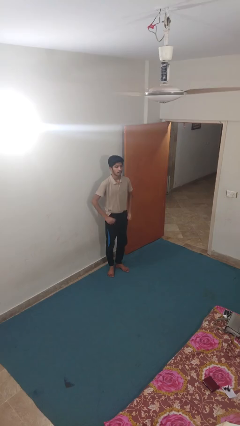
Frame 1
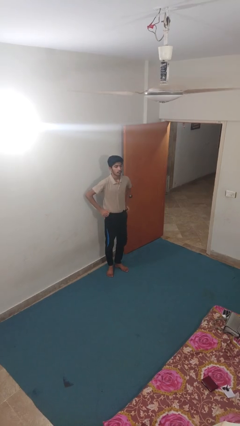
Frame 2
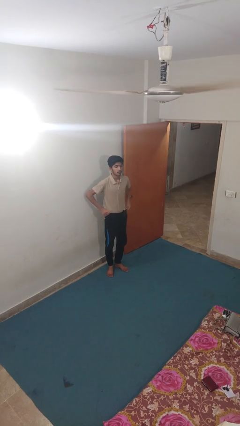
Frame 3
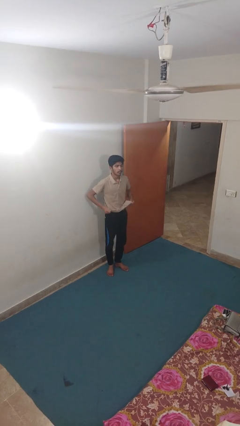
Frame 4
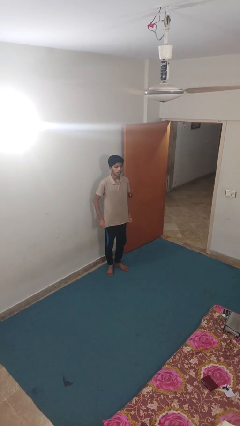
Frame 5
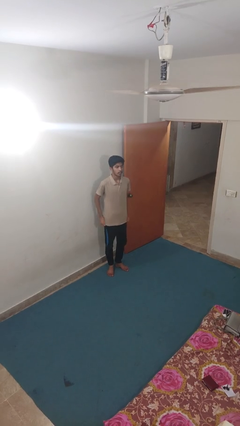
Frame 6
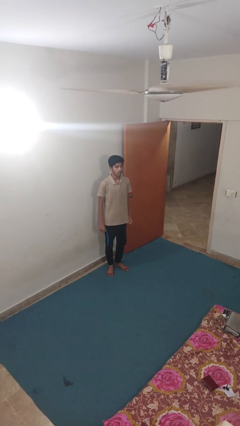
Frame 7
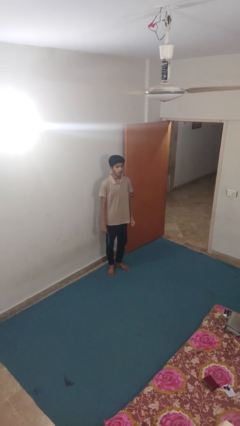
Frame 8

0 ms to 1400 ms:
person untucks shirt

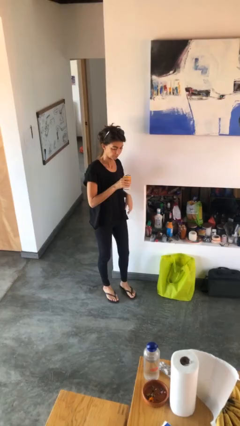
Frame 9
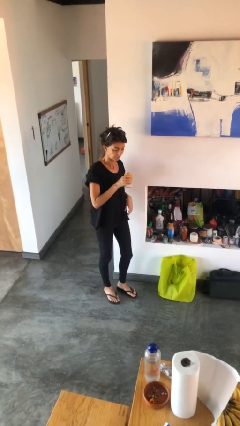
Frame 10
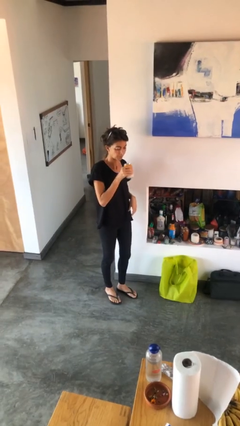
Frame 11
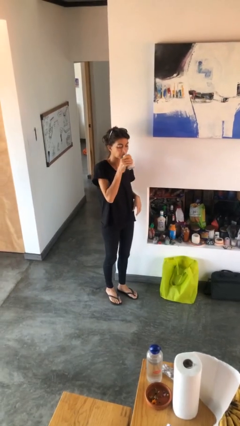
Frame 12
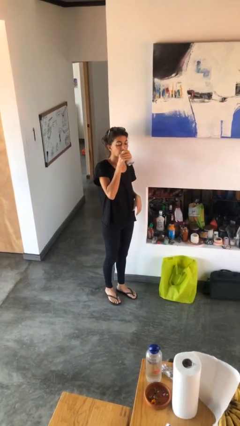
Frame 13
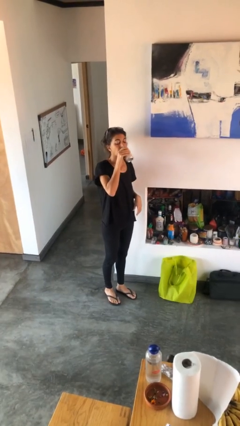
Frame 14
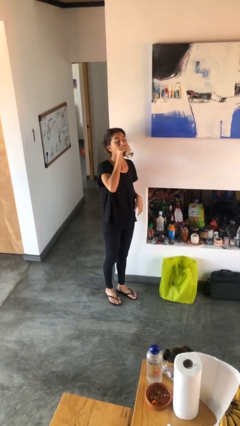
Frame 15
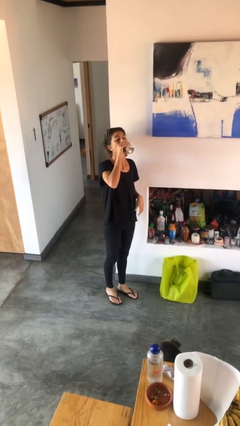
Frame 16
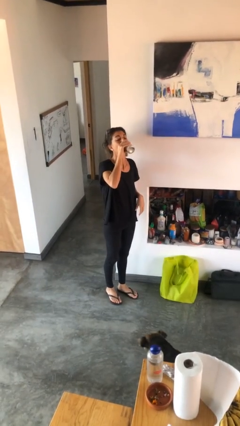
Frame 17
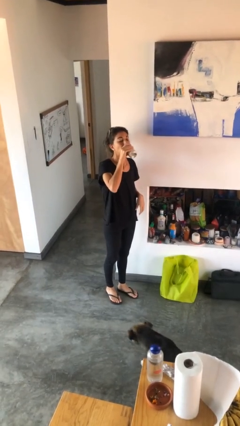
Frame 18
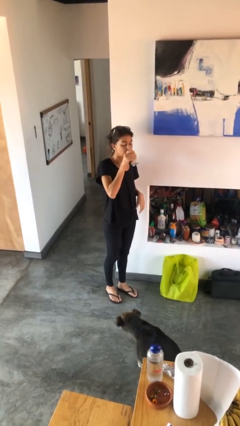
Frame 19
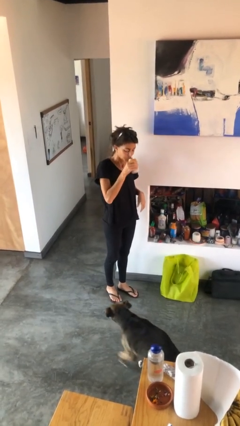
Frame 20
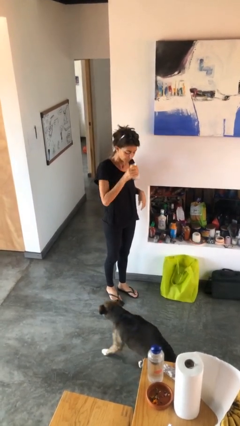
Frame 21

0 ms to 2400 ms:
person drinks from beverage can

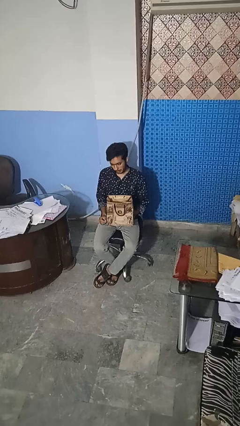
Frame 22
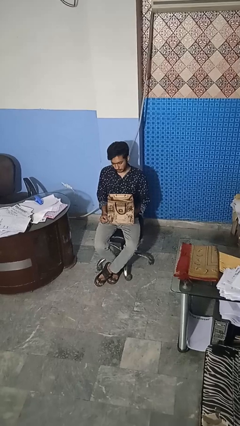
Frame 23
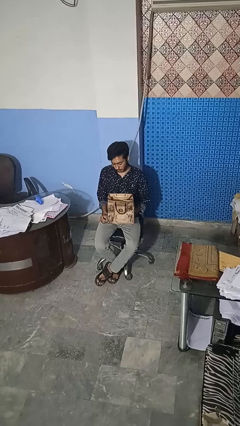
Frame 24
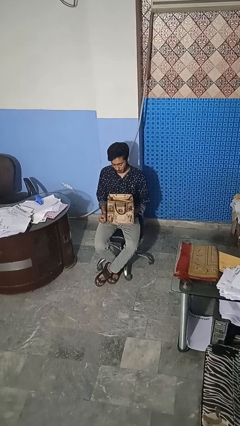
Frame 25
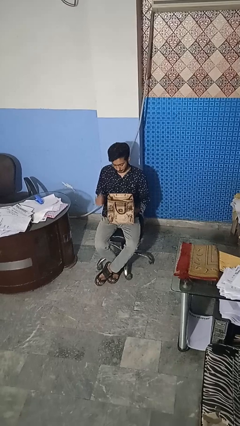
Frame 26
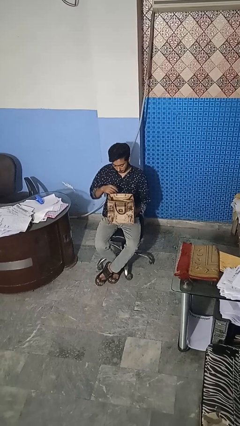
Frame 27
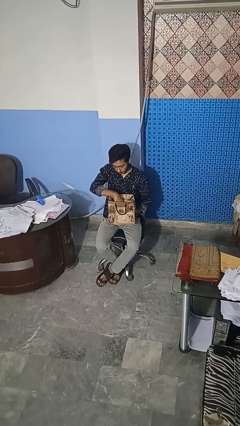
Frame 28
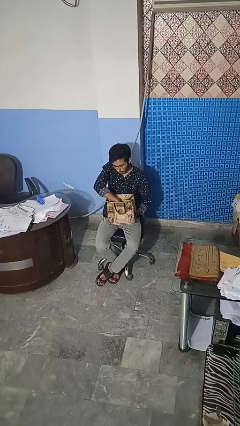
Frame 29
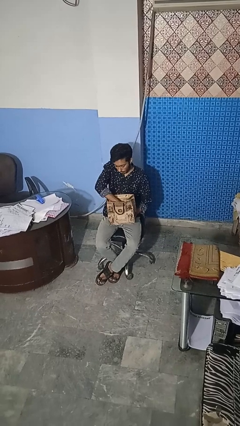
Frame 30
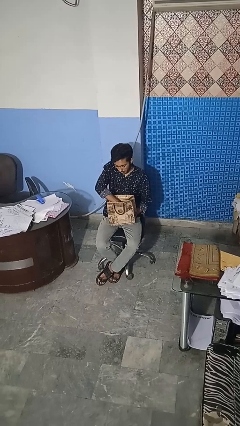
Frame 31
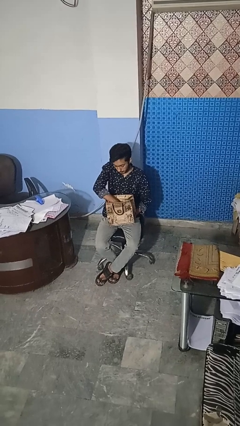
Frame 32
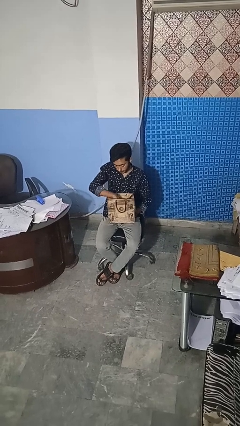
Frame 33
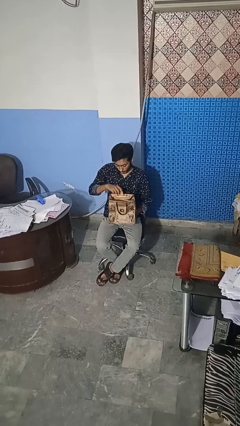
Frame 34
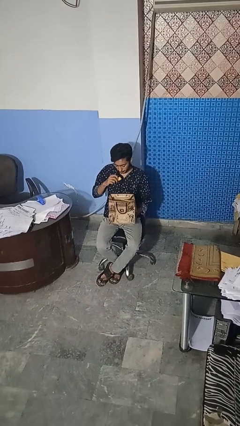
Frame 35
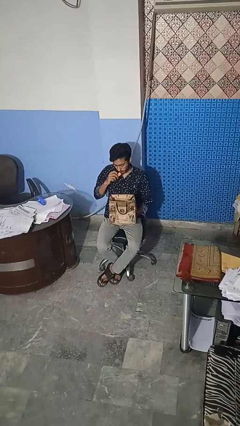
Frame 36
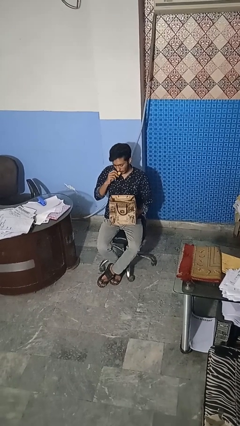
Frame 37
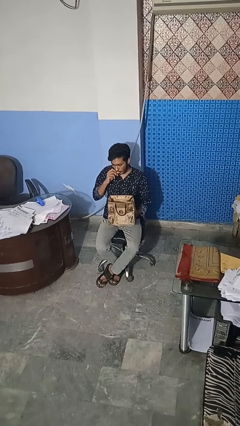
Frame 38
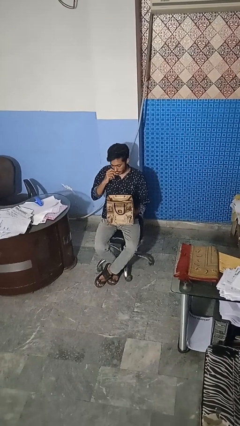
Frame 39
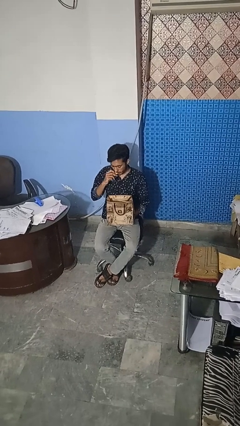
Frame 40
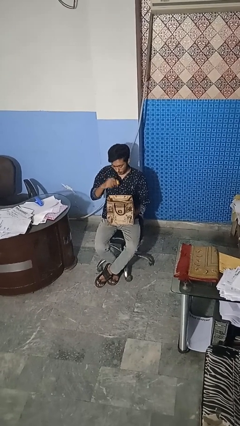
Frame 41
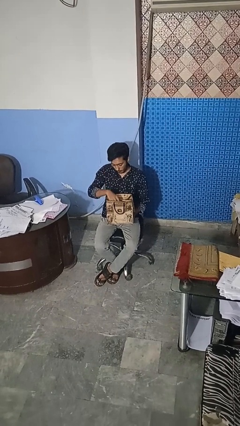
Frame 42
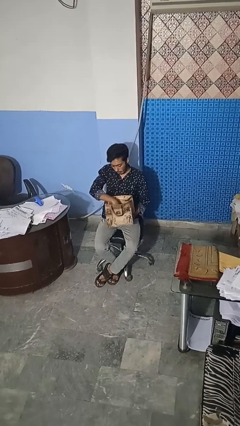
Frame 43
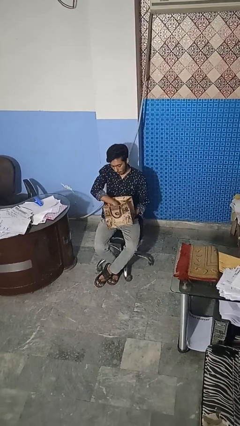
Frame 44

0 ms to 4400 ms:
person eats snack from bag

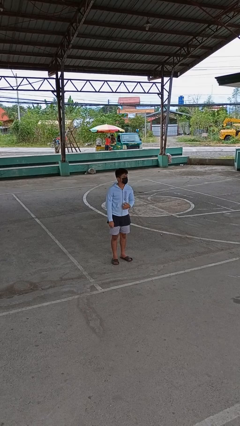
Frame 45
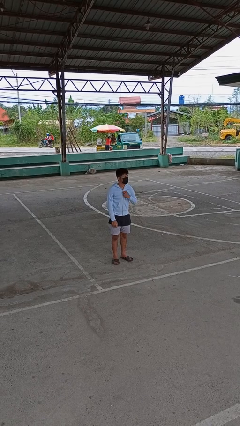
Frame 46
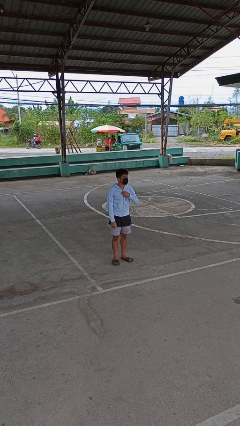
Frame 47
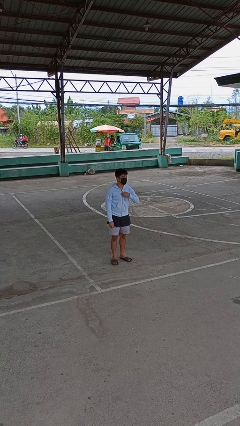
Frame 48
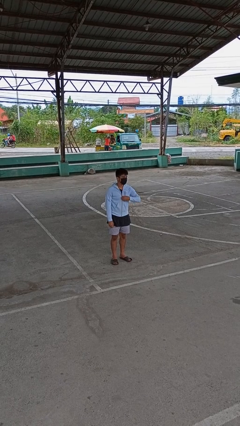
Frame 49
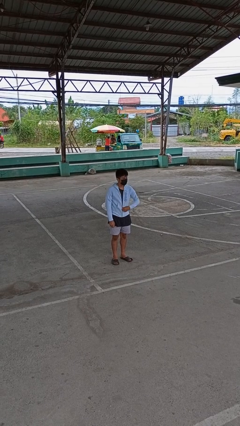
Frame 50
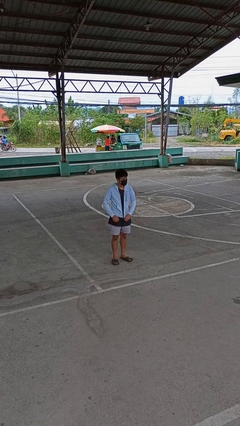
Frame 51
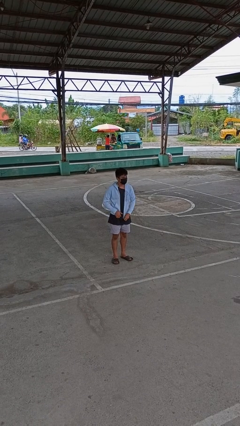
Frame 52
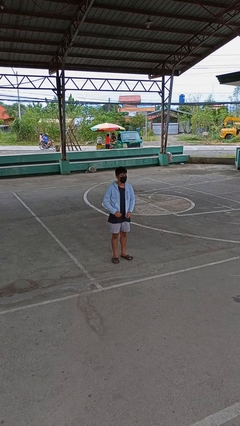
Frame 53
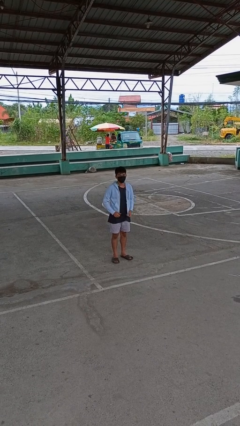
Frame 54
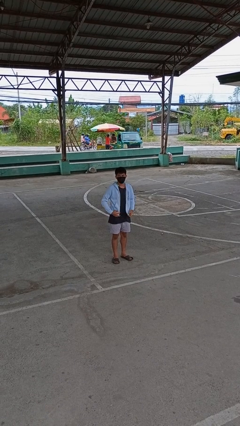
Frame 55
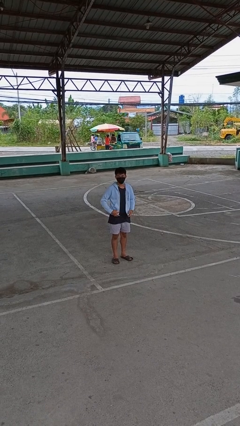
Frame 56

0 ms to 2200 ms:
person unzips jacket

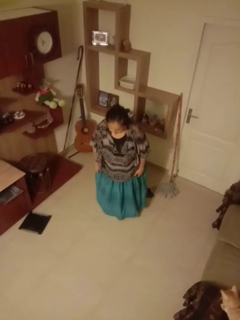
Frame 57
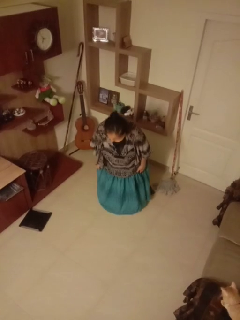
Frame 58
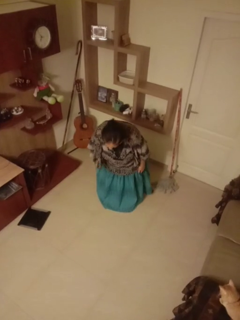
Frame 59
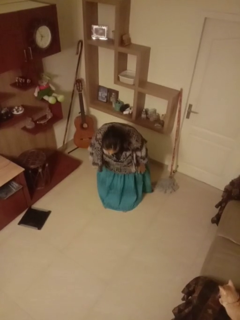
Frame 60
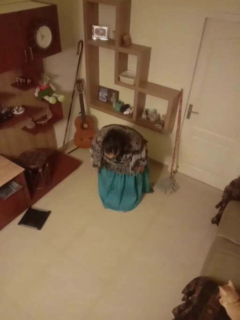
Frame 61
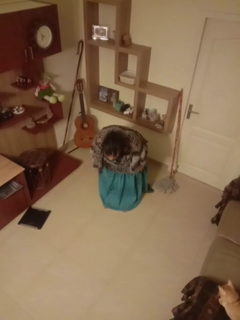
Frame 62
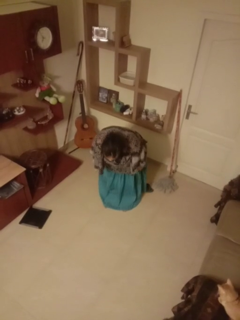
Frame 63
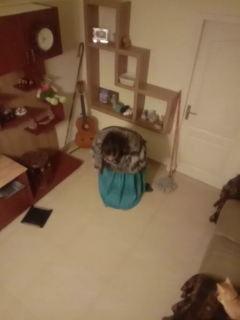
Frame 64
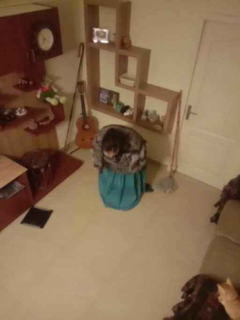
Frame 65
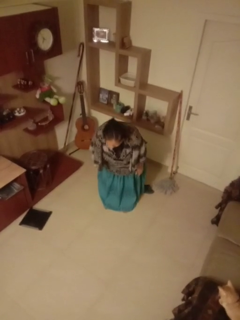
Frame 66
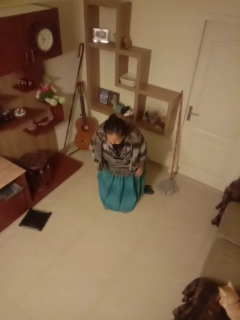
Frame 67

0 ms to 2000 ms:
person bows

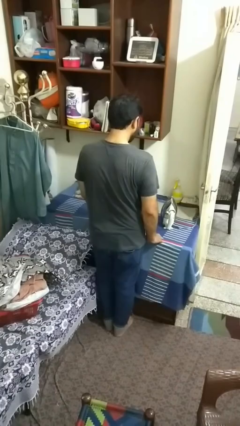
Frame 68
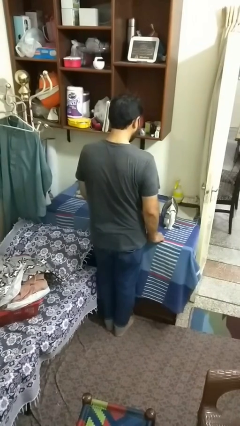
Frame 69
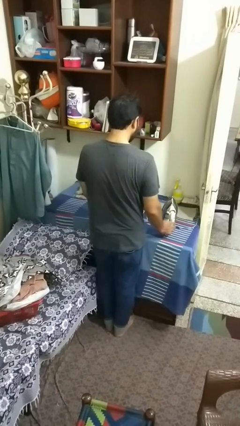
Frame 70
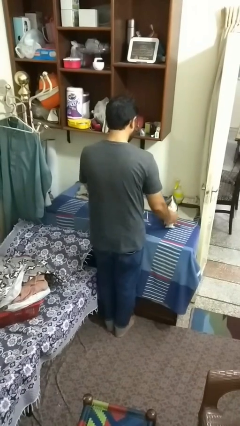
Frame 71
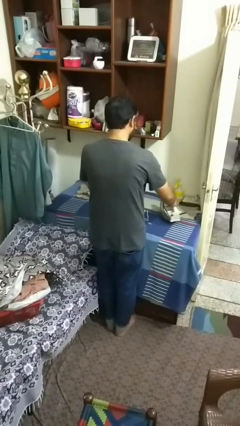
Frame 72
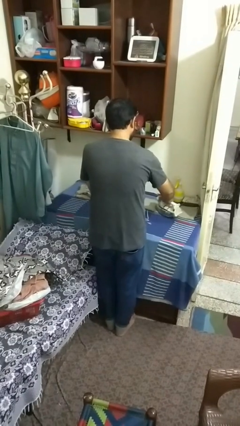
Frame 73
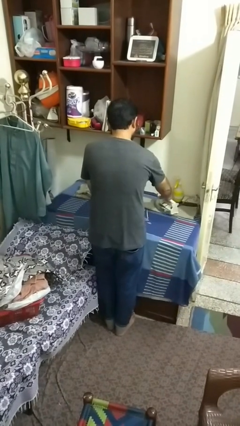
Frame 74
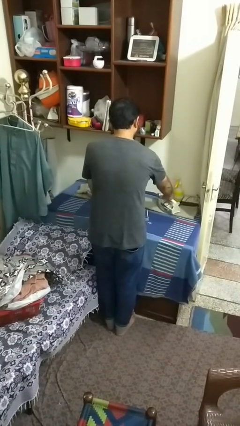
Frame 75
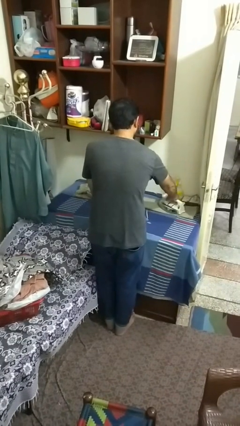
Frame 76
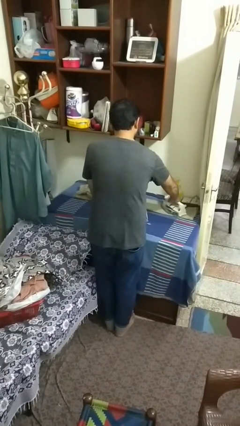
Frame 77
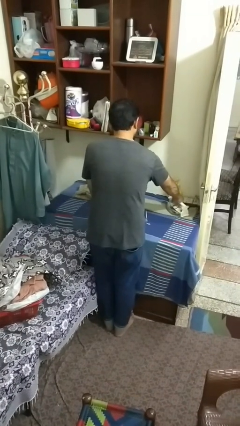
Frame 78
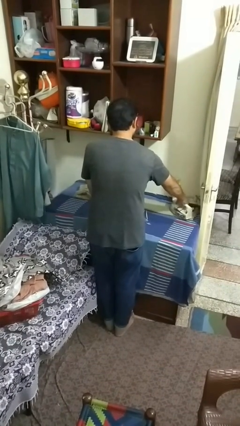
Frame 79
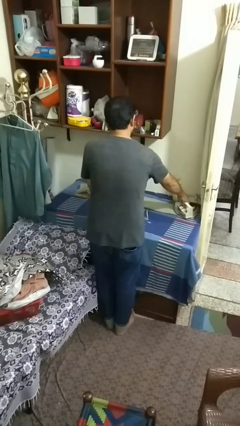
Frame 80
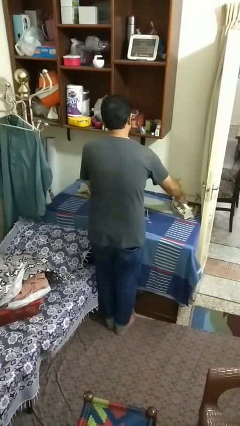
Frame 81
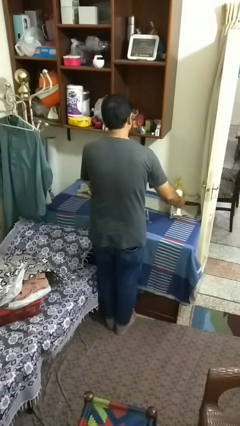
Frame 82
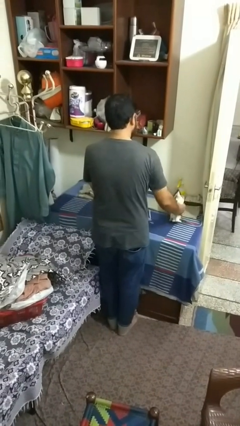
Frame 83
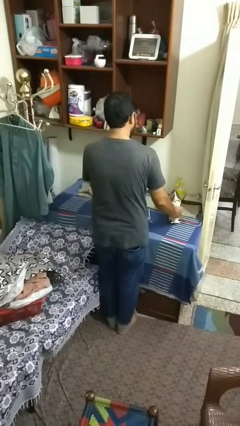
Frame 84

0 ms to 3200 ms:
person irons clothes

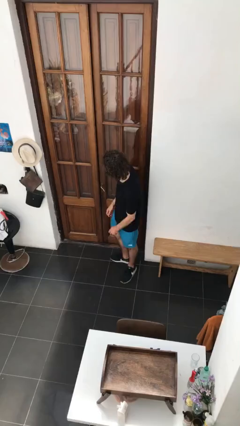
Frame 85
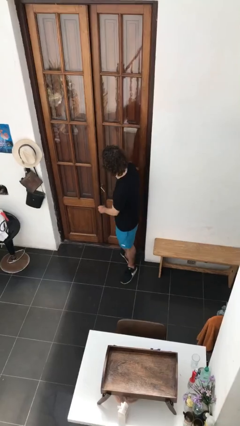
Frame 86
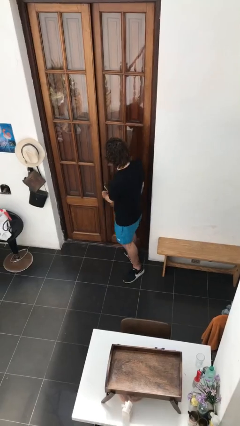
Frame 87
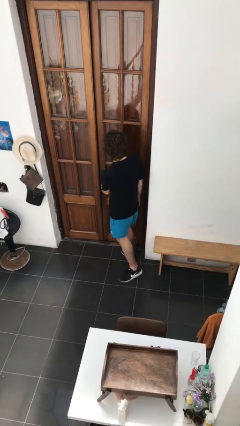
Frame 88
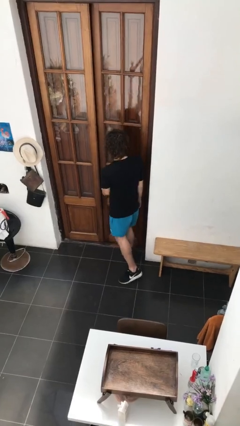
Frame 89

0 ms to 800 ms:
person opens facility door

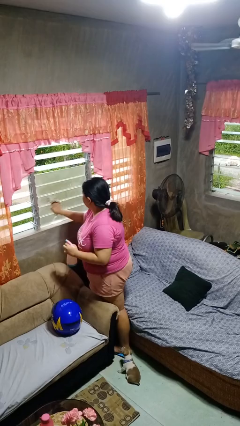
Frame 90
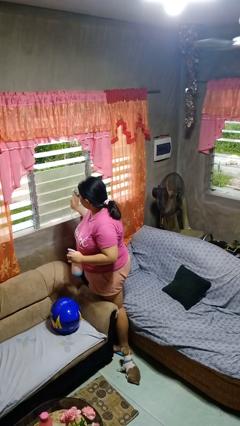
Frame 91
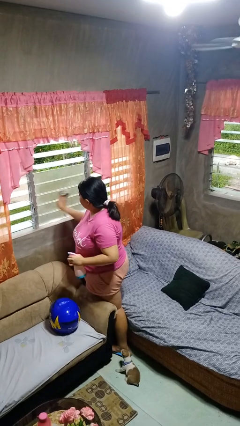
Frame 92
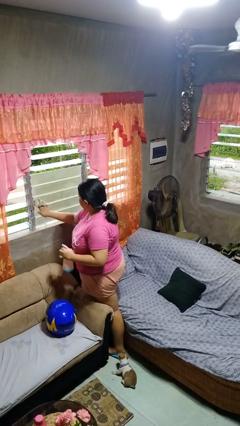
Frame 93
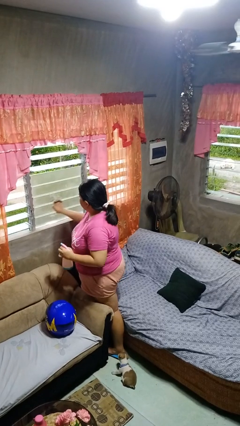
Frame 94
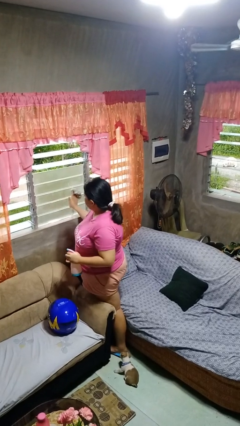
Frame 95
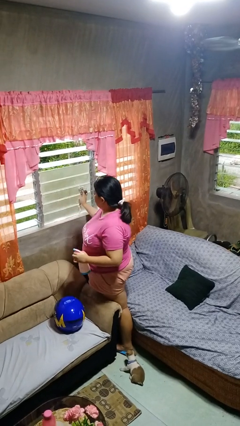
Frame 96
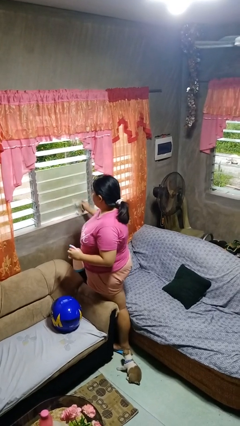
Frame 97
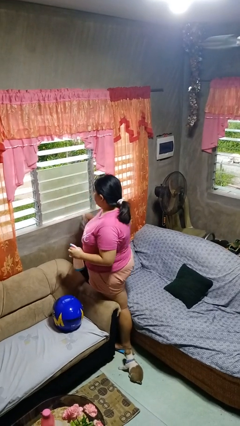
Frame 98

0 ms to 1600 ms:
person washes window
